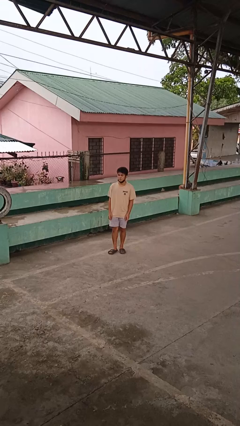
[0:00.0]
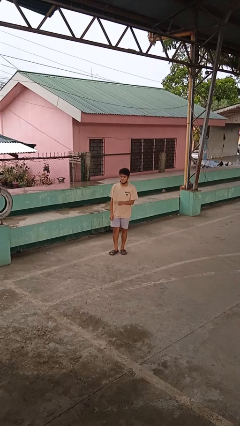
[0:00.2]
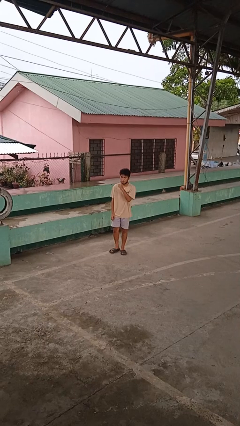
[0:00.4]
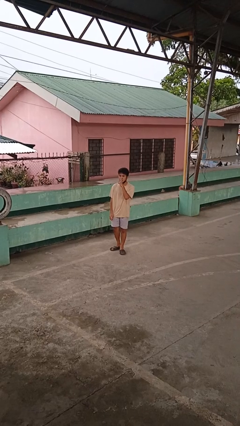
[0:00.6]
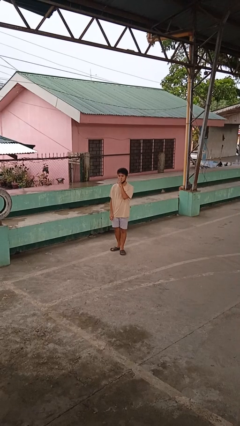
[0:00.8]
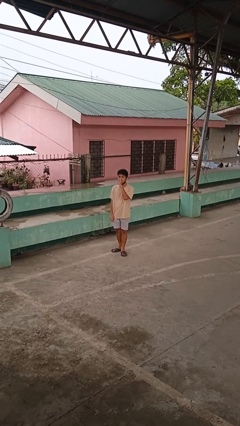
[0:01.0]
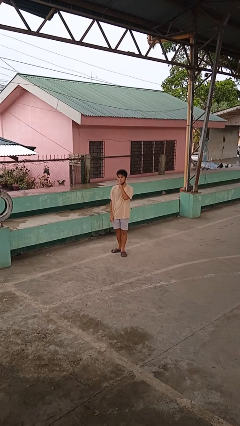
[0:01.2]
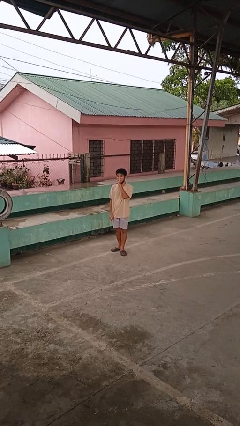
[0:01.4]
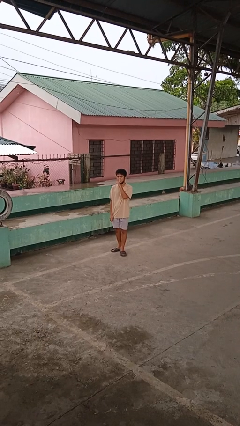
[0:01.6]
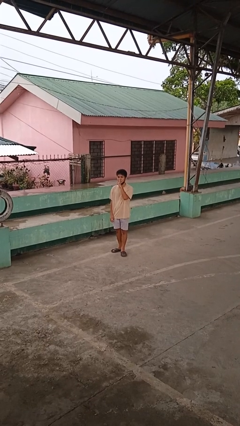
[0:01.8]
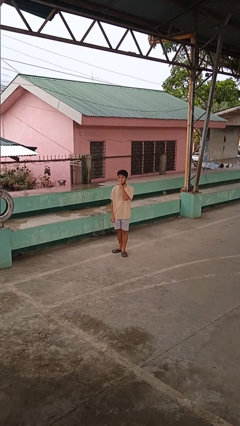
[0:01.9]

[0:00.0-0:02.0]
person gestures be quiet

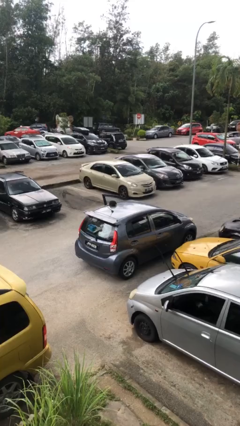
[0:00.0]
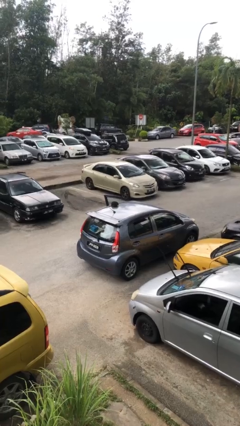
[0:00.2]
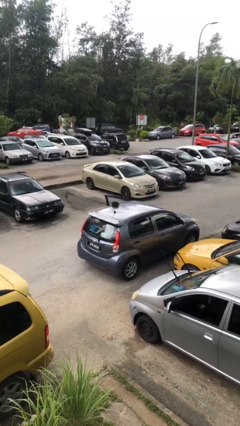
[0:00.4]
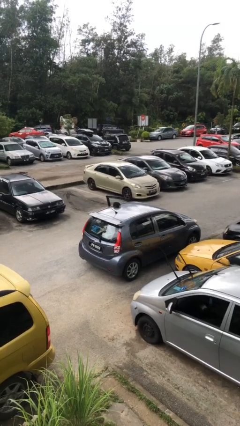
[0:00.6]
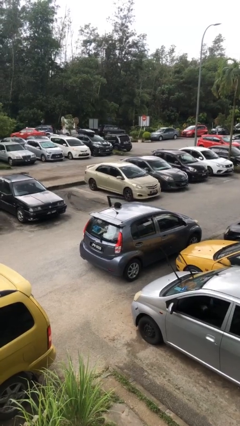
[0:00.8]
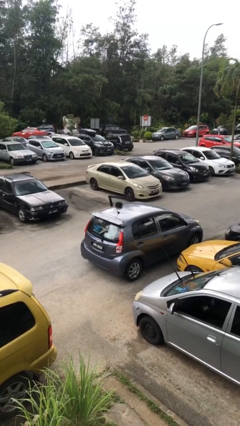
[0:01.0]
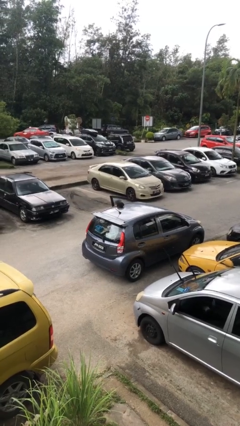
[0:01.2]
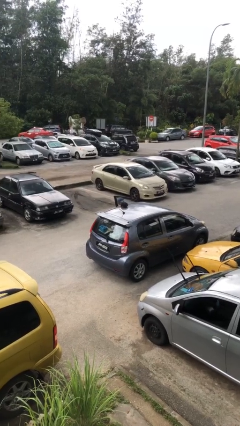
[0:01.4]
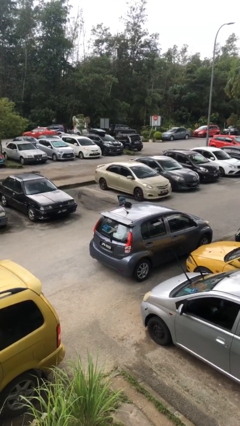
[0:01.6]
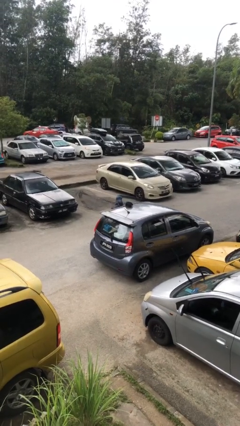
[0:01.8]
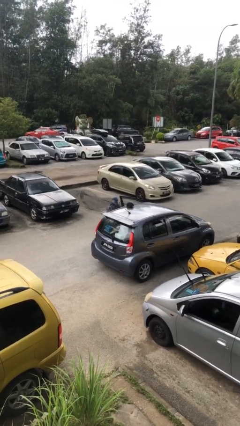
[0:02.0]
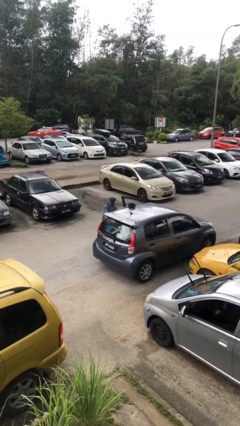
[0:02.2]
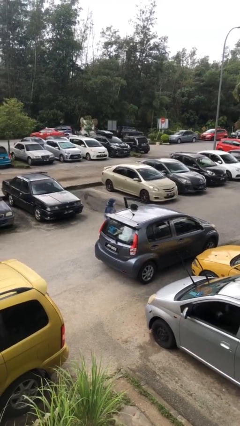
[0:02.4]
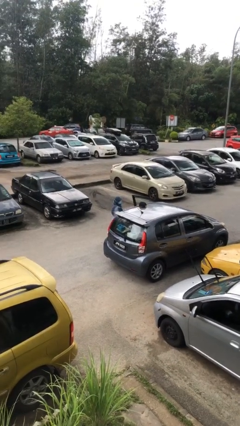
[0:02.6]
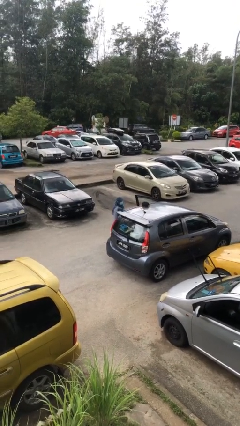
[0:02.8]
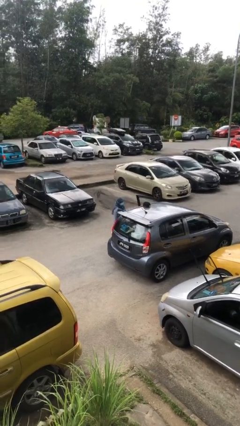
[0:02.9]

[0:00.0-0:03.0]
person exits car

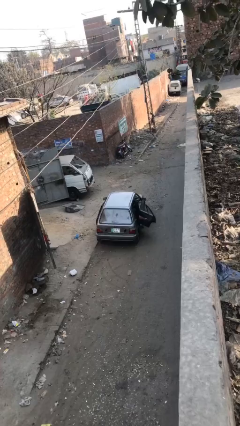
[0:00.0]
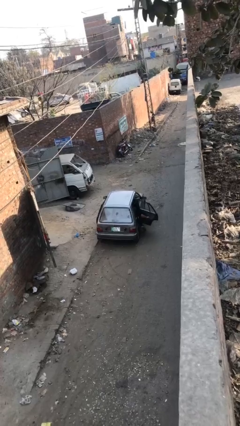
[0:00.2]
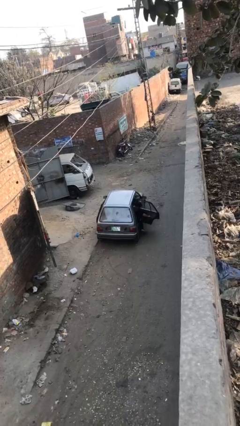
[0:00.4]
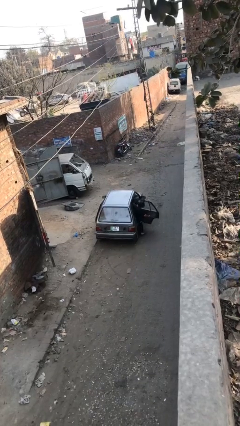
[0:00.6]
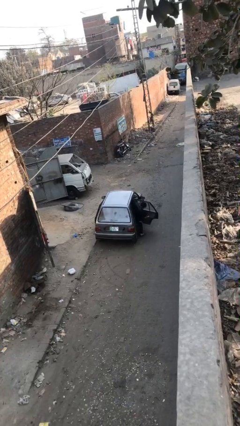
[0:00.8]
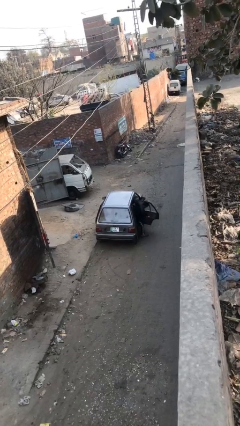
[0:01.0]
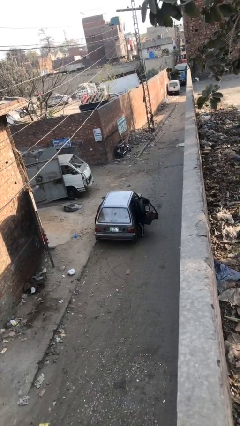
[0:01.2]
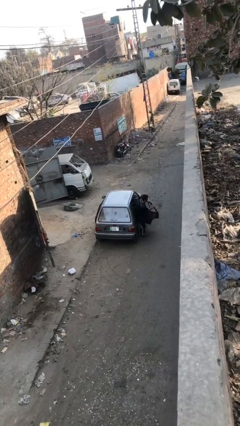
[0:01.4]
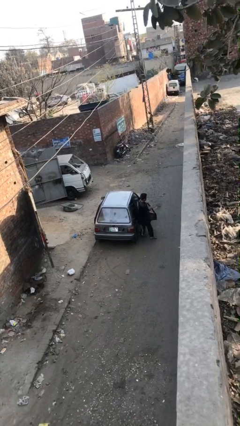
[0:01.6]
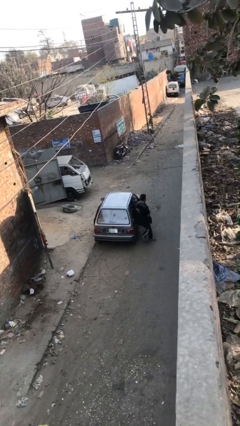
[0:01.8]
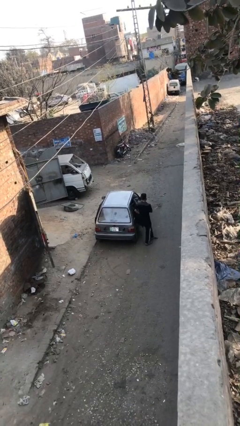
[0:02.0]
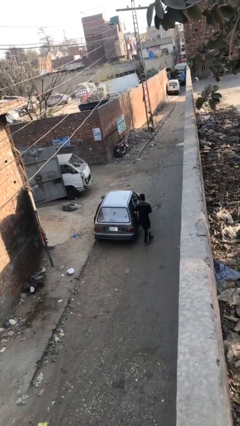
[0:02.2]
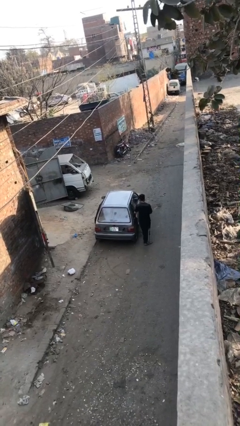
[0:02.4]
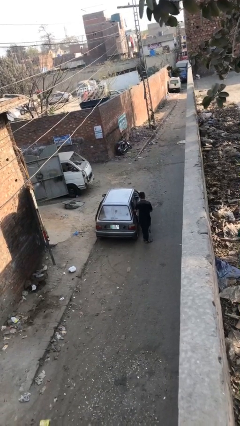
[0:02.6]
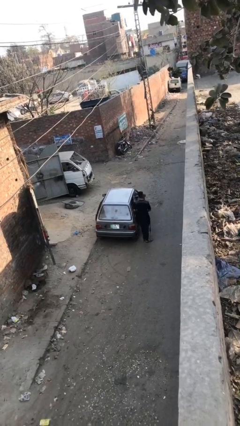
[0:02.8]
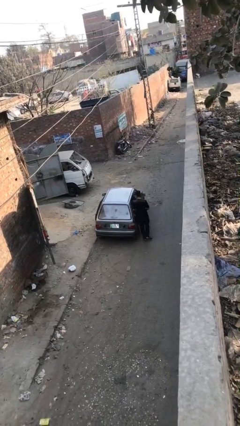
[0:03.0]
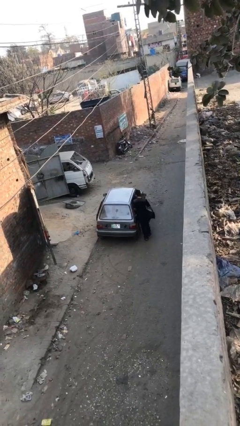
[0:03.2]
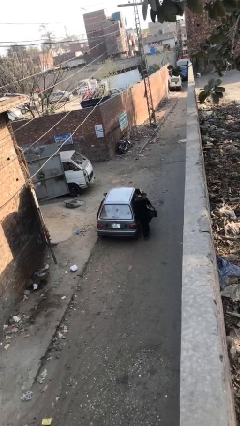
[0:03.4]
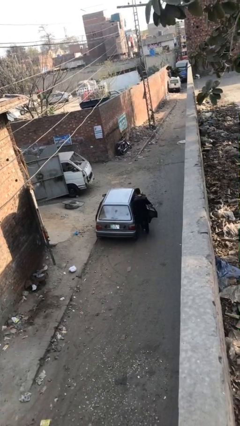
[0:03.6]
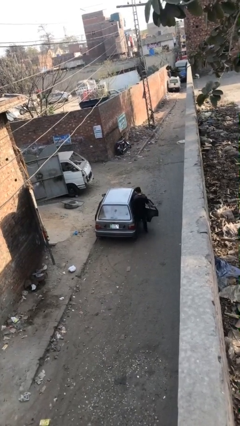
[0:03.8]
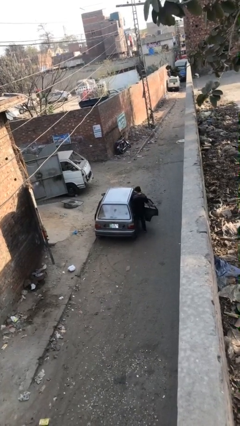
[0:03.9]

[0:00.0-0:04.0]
car drops off person

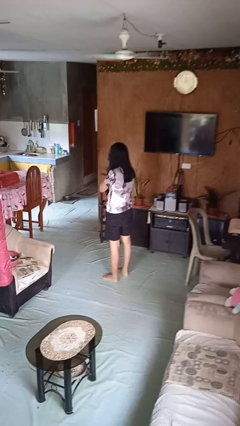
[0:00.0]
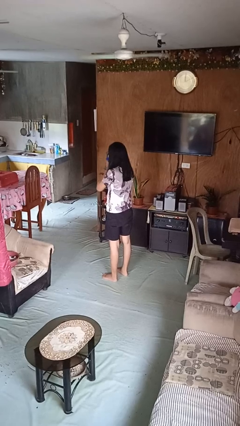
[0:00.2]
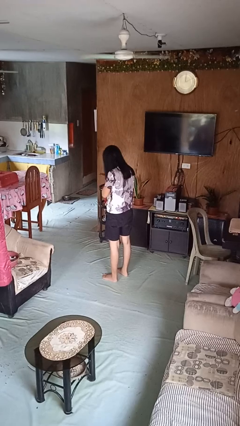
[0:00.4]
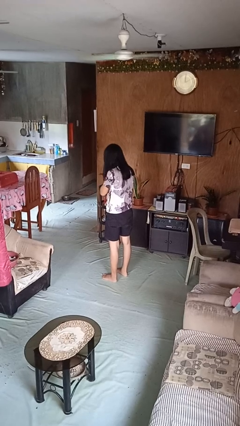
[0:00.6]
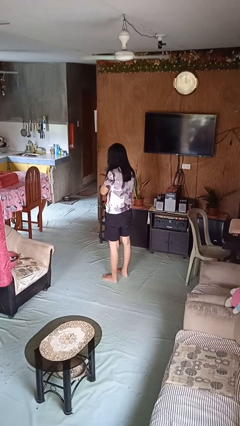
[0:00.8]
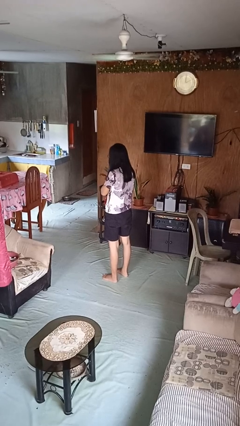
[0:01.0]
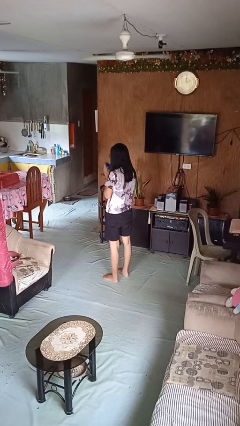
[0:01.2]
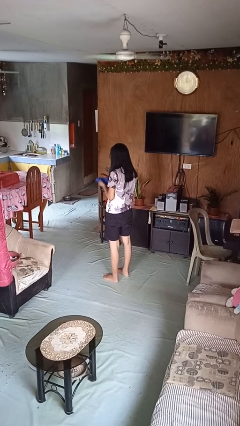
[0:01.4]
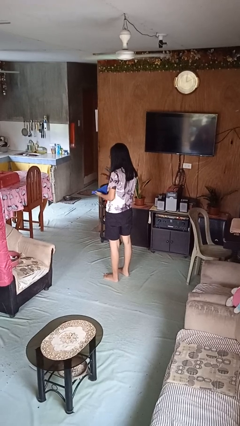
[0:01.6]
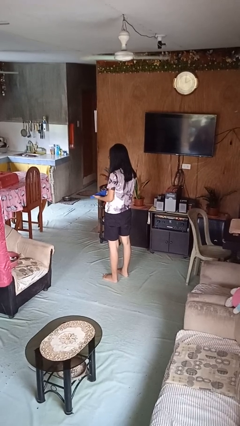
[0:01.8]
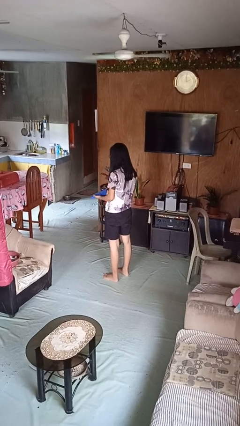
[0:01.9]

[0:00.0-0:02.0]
person blows nose

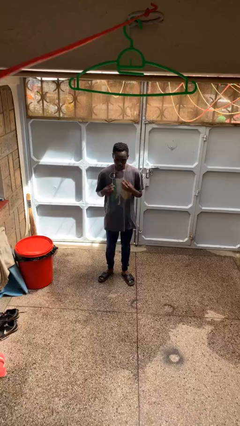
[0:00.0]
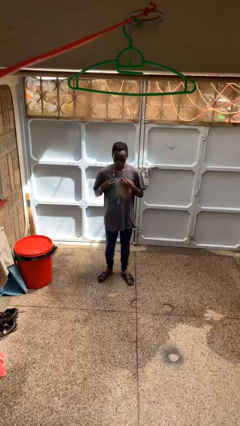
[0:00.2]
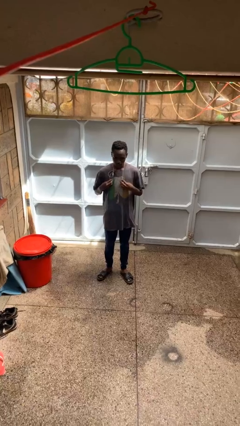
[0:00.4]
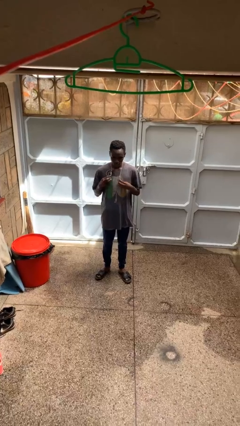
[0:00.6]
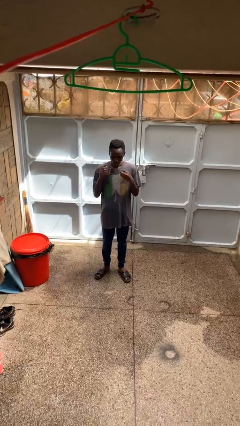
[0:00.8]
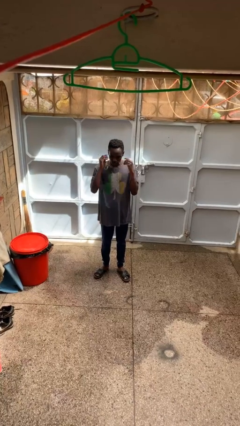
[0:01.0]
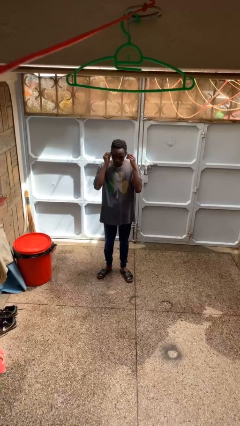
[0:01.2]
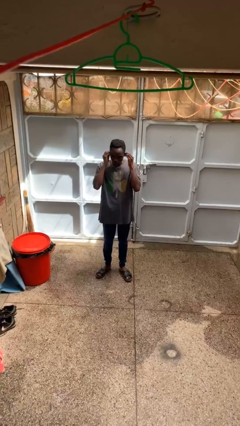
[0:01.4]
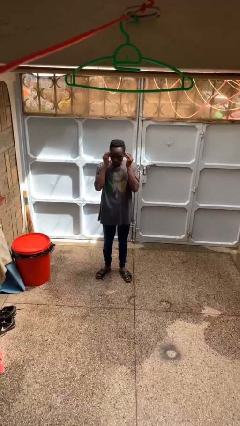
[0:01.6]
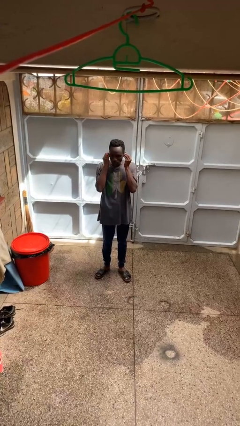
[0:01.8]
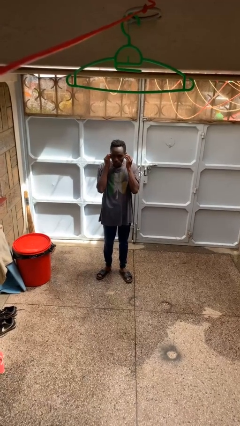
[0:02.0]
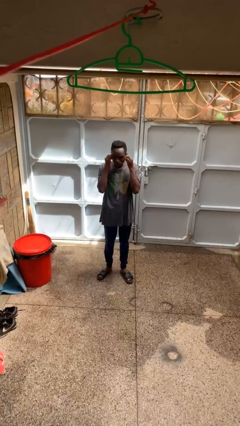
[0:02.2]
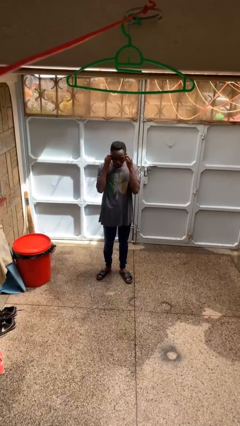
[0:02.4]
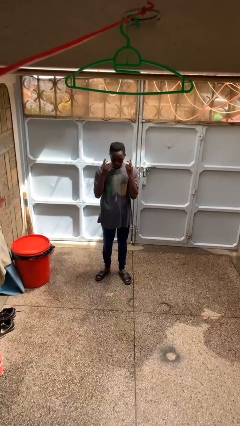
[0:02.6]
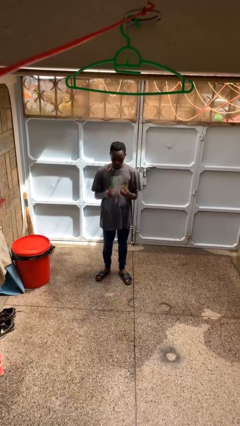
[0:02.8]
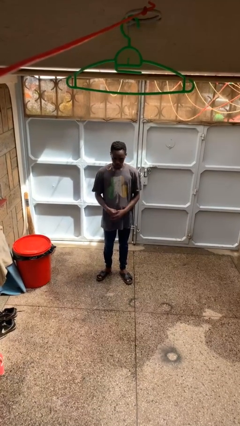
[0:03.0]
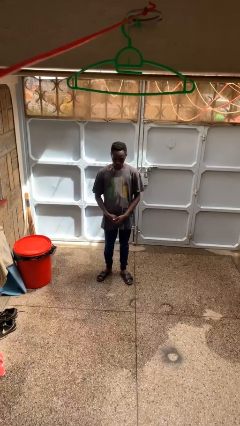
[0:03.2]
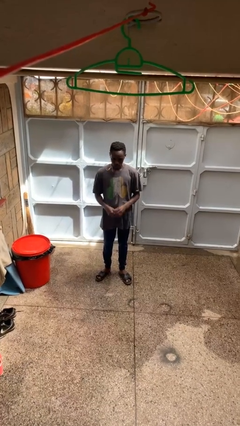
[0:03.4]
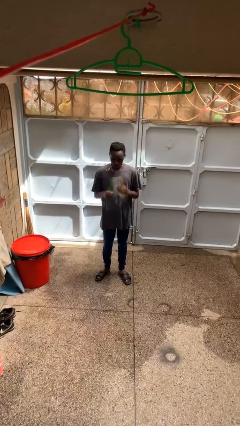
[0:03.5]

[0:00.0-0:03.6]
person puts on headphones

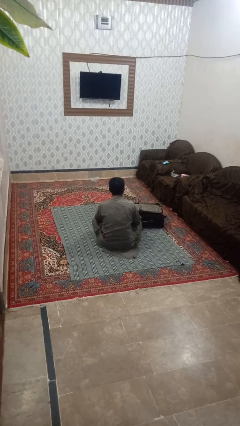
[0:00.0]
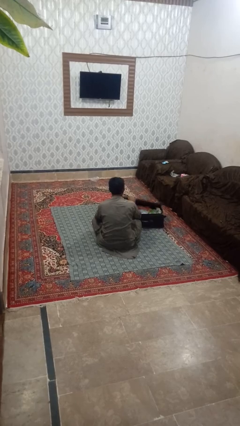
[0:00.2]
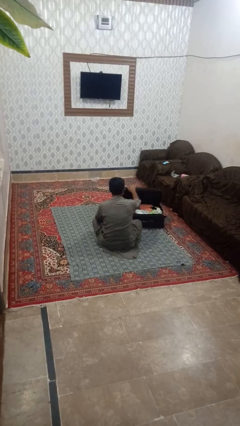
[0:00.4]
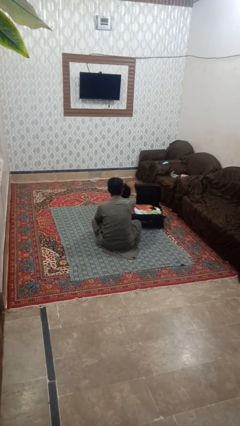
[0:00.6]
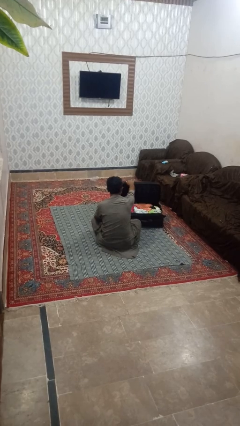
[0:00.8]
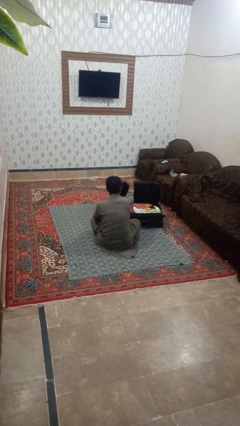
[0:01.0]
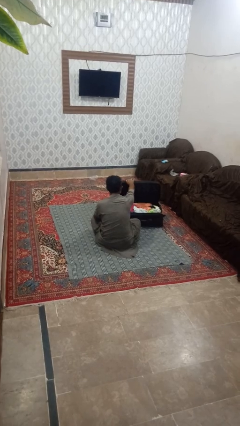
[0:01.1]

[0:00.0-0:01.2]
person opens suitcase

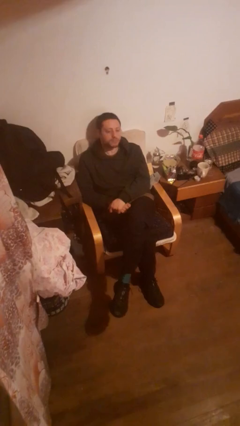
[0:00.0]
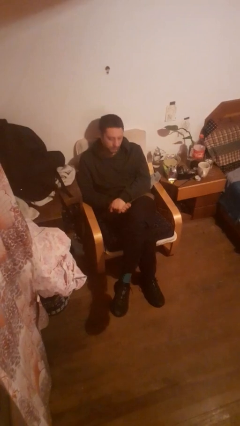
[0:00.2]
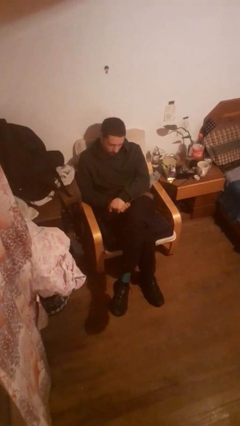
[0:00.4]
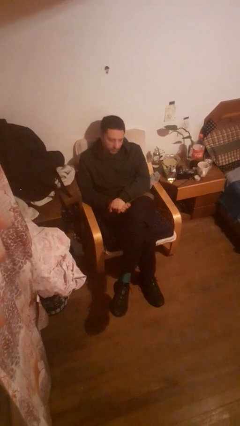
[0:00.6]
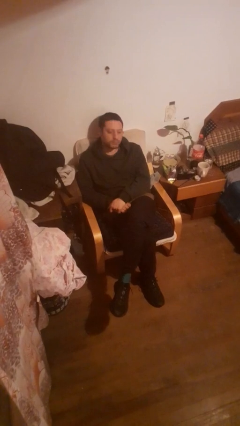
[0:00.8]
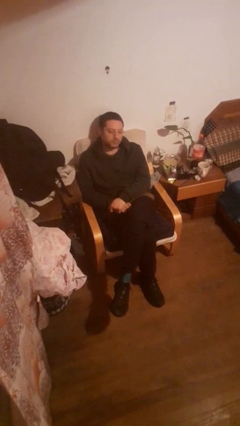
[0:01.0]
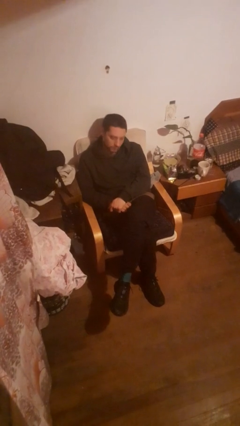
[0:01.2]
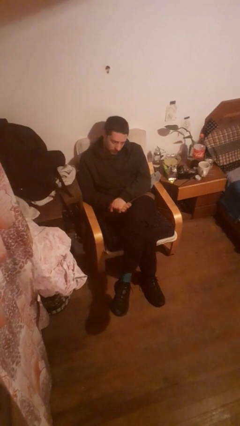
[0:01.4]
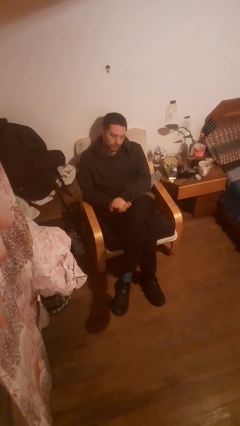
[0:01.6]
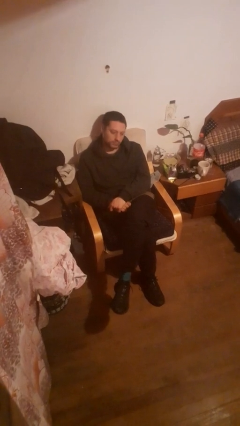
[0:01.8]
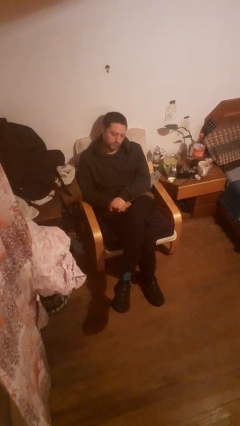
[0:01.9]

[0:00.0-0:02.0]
person nods head
